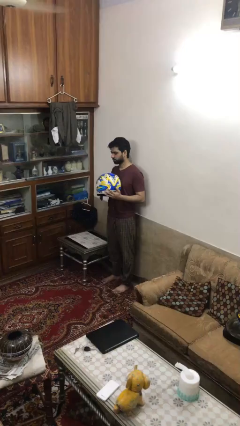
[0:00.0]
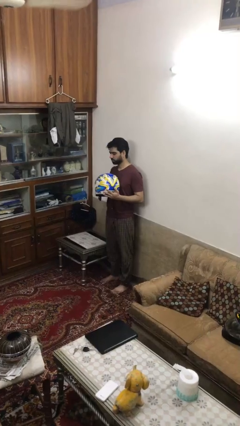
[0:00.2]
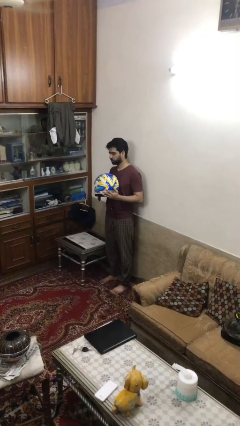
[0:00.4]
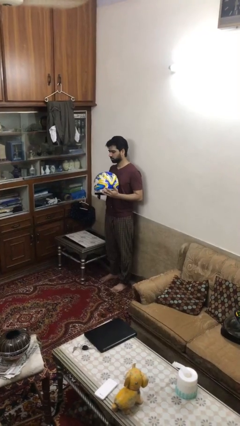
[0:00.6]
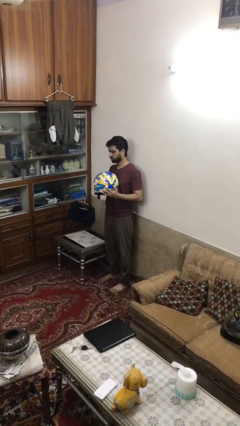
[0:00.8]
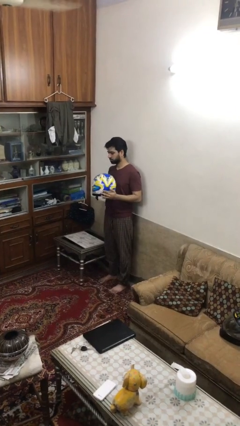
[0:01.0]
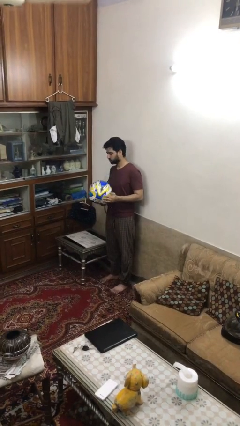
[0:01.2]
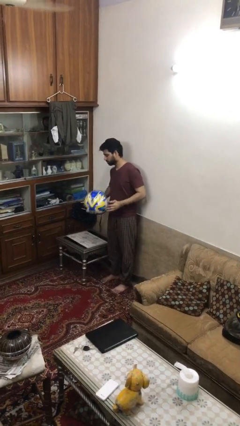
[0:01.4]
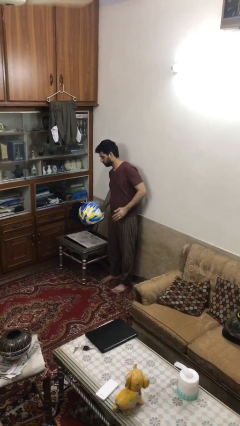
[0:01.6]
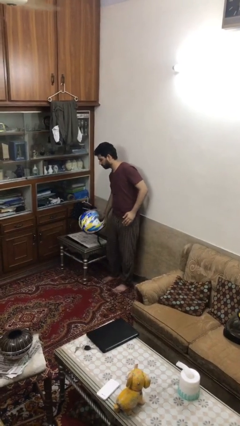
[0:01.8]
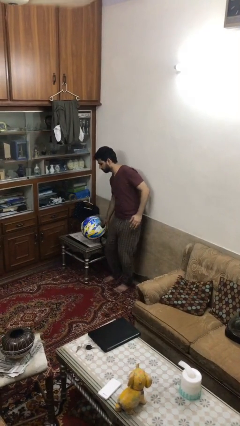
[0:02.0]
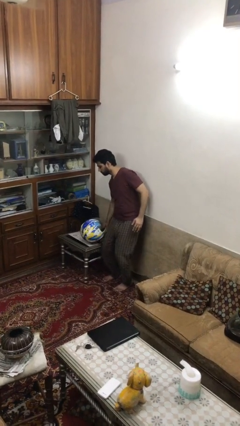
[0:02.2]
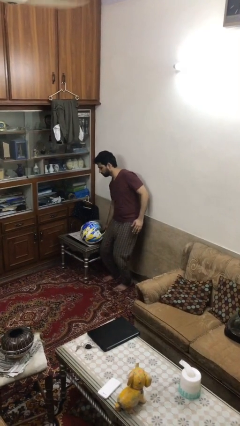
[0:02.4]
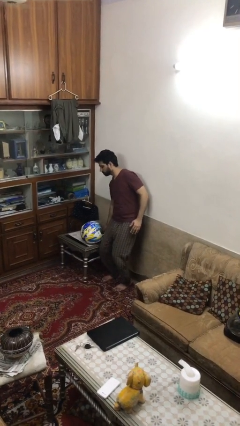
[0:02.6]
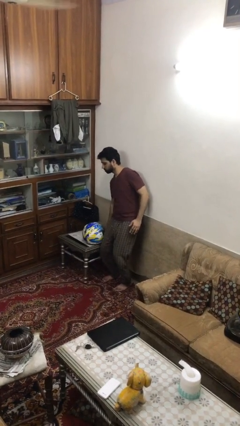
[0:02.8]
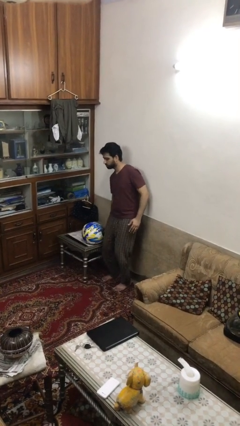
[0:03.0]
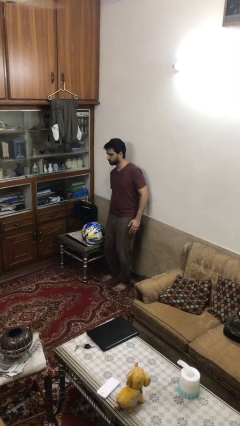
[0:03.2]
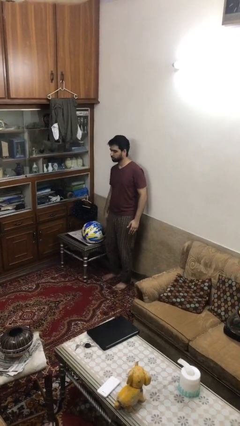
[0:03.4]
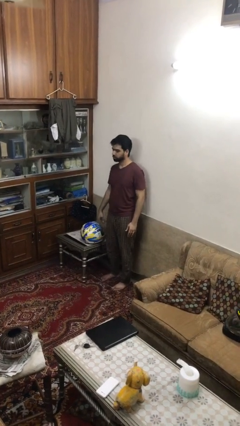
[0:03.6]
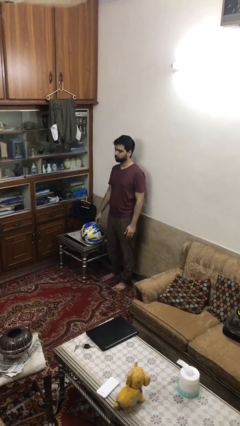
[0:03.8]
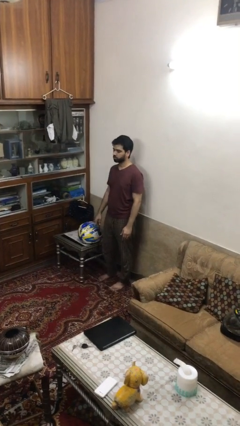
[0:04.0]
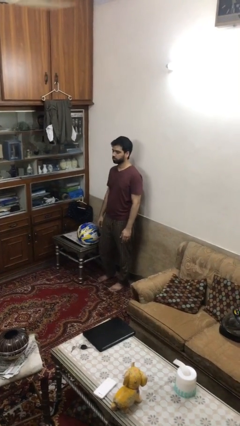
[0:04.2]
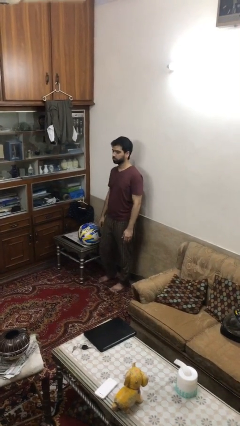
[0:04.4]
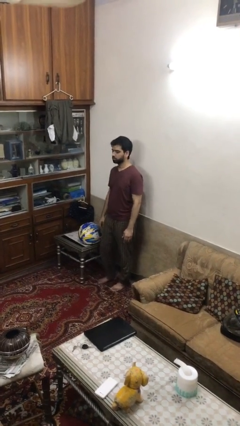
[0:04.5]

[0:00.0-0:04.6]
person puts down object on table

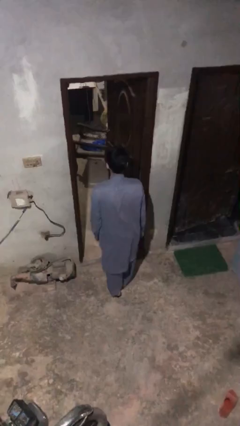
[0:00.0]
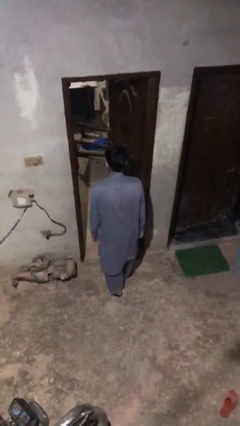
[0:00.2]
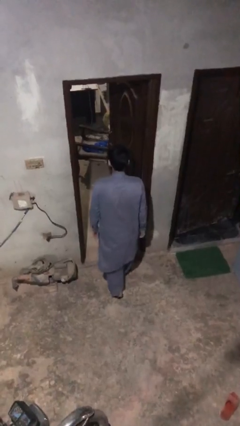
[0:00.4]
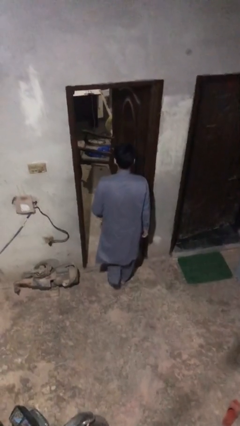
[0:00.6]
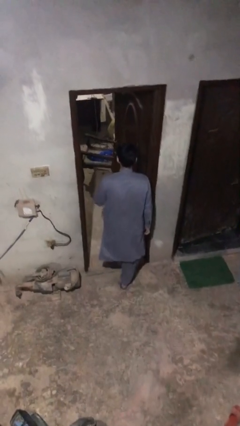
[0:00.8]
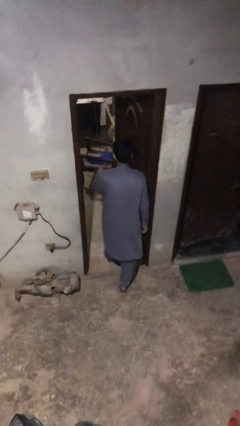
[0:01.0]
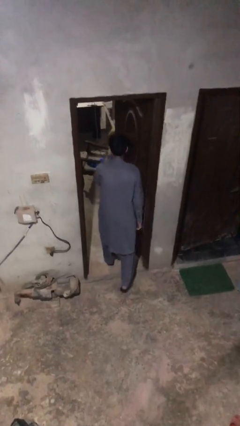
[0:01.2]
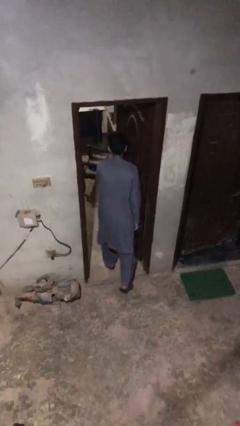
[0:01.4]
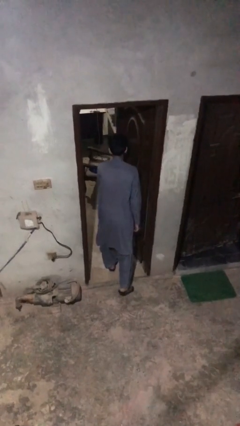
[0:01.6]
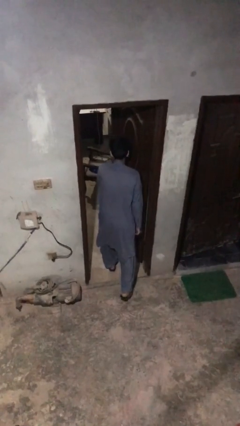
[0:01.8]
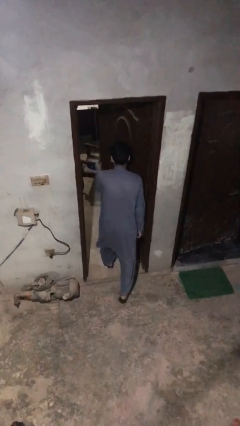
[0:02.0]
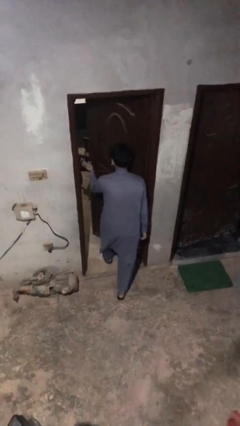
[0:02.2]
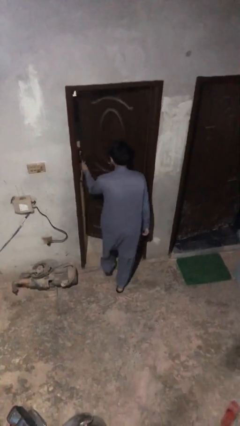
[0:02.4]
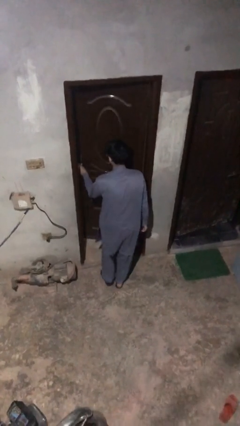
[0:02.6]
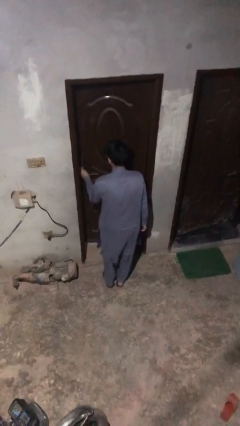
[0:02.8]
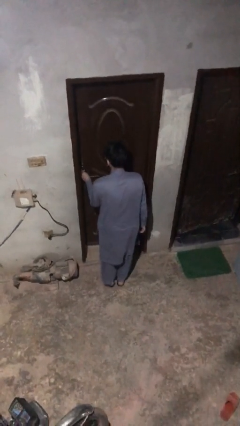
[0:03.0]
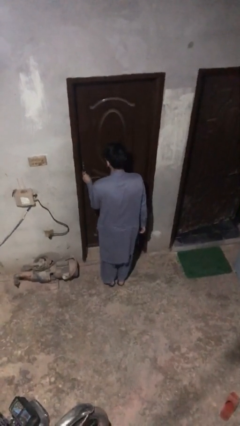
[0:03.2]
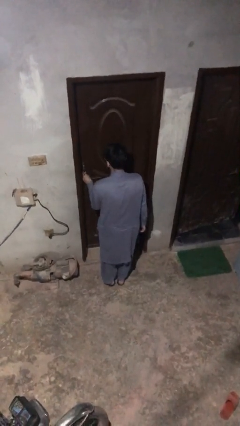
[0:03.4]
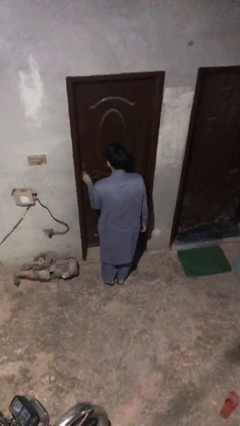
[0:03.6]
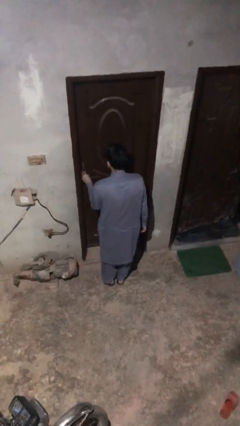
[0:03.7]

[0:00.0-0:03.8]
person closes facility door

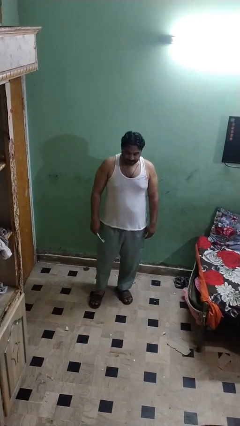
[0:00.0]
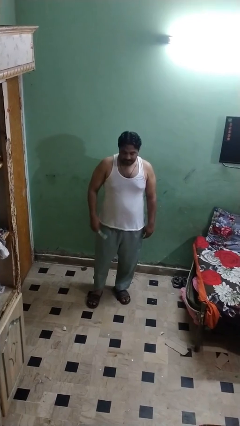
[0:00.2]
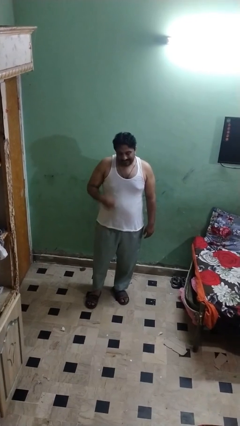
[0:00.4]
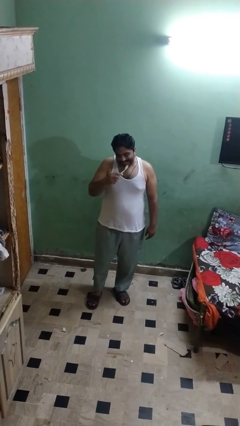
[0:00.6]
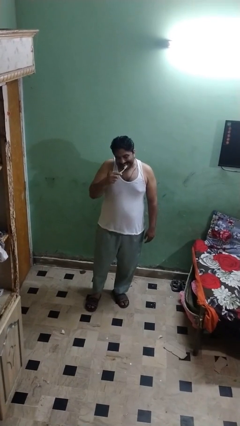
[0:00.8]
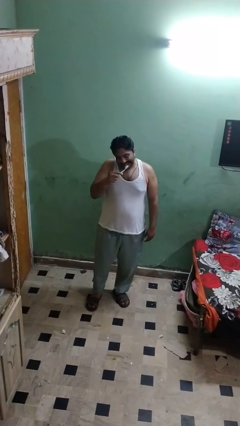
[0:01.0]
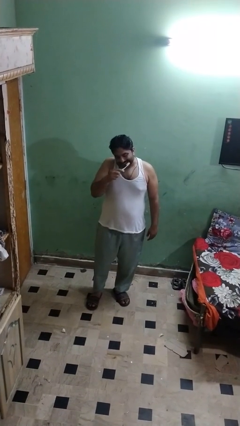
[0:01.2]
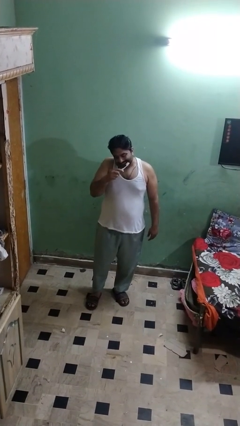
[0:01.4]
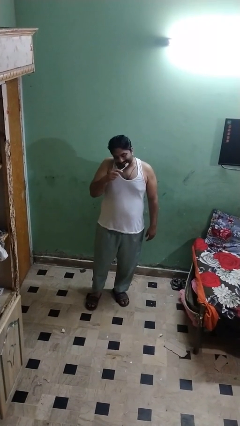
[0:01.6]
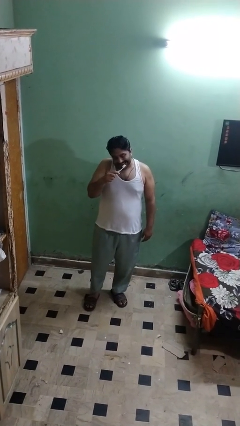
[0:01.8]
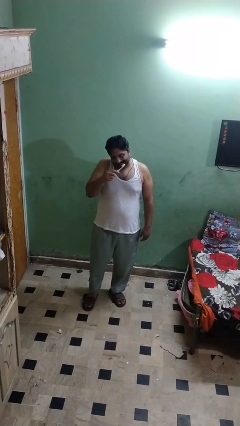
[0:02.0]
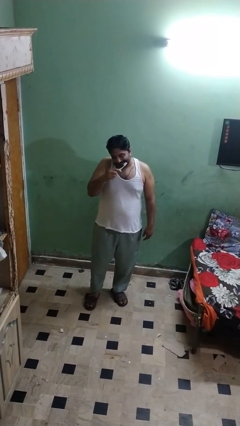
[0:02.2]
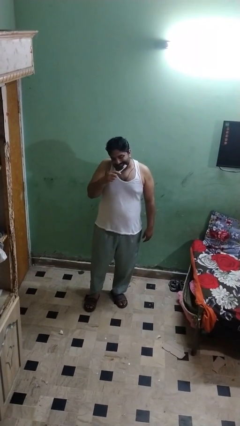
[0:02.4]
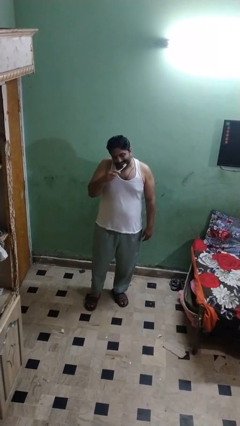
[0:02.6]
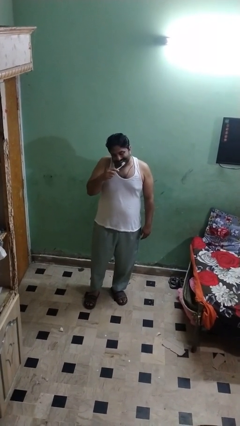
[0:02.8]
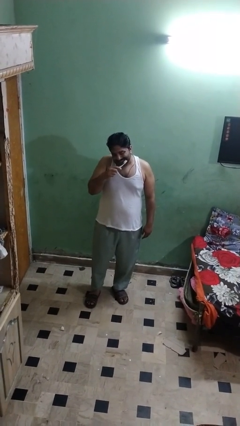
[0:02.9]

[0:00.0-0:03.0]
person brushes teeth

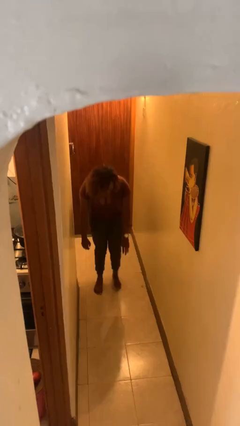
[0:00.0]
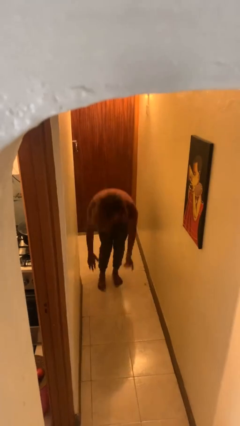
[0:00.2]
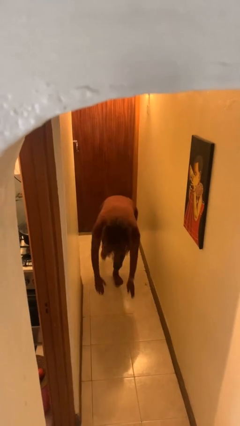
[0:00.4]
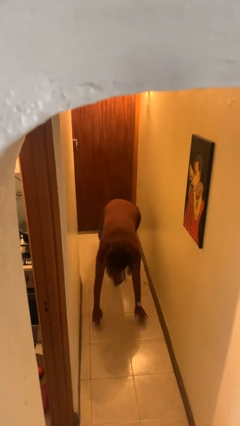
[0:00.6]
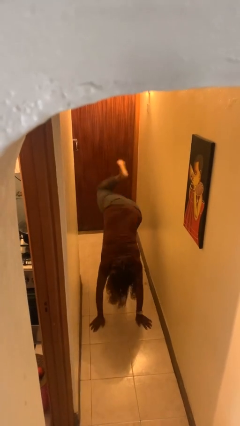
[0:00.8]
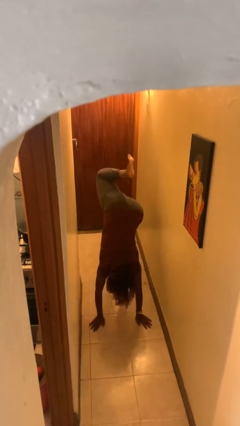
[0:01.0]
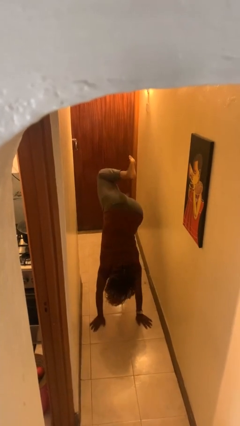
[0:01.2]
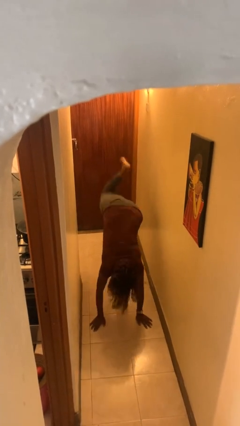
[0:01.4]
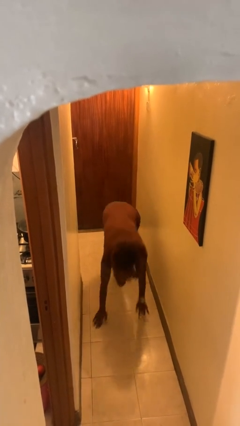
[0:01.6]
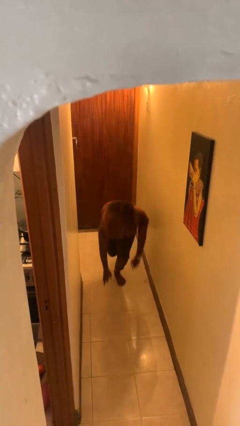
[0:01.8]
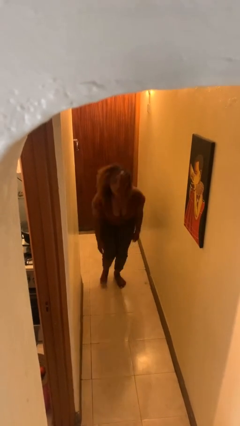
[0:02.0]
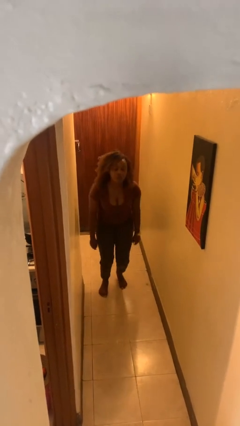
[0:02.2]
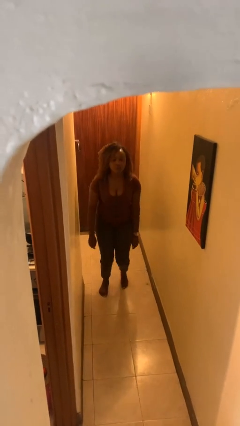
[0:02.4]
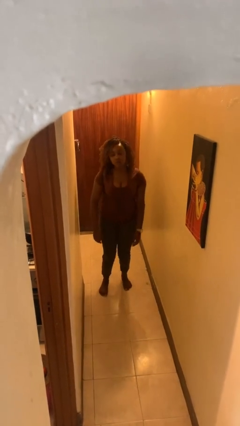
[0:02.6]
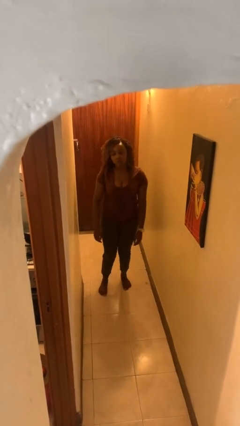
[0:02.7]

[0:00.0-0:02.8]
person handstand

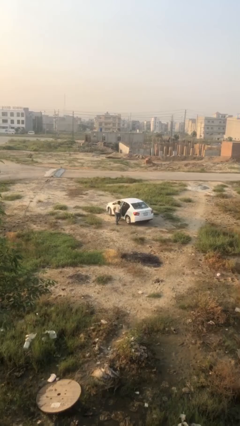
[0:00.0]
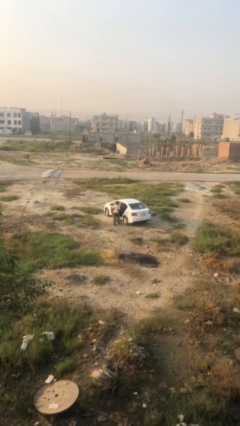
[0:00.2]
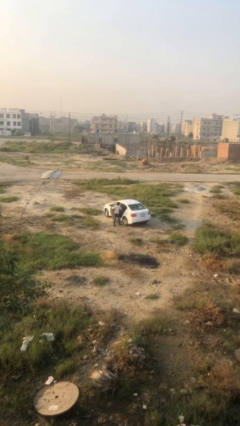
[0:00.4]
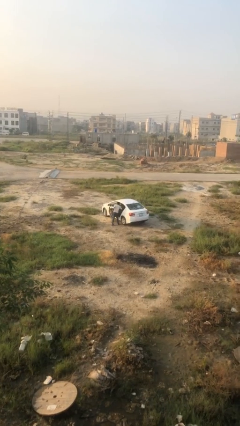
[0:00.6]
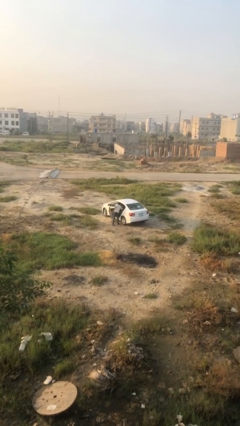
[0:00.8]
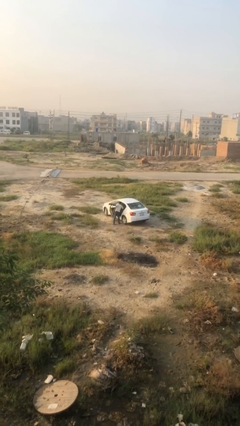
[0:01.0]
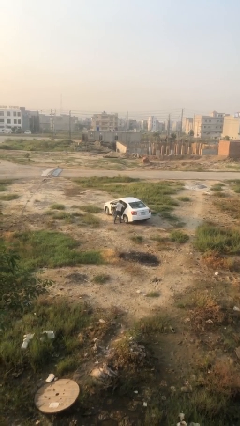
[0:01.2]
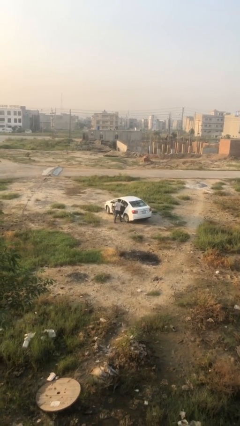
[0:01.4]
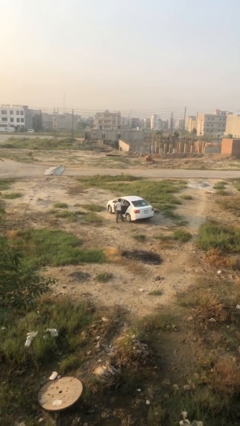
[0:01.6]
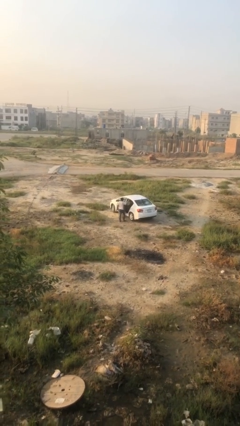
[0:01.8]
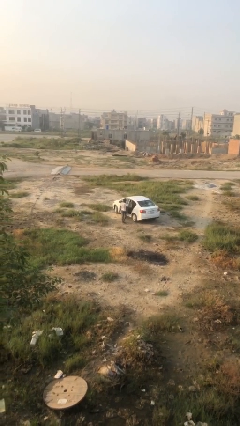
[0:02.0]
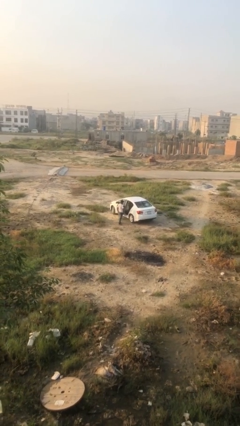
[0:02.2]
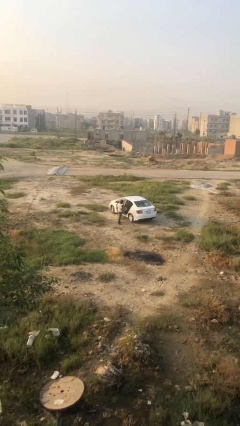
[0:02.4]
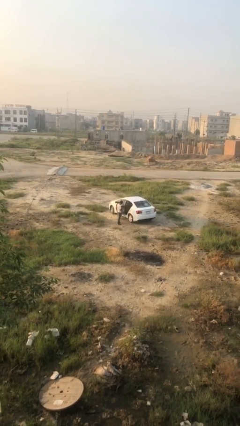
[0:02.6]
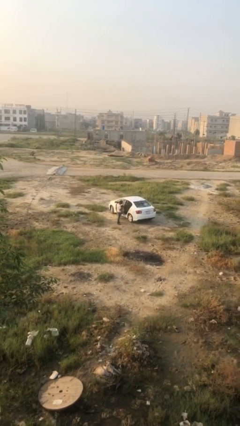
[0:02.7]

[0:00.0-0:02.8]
person unloads car

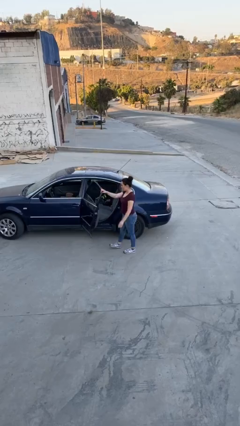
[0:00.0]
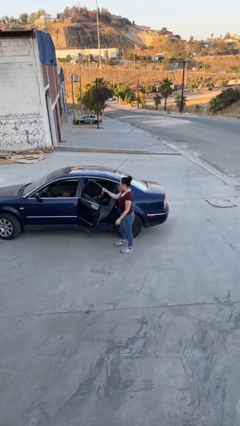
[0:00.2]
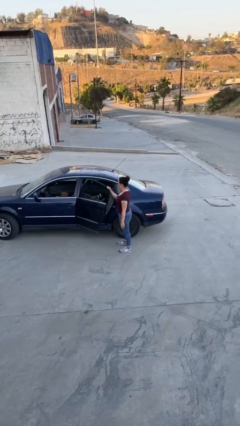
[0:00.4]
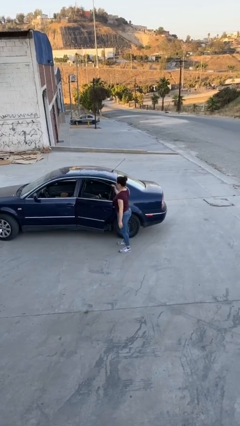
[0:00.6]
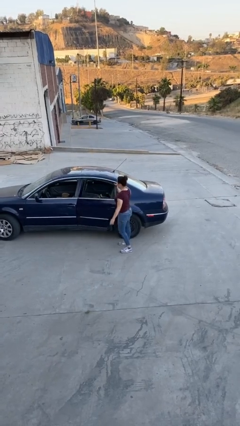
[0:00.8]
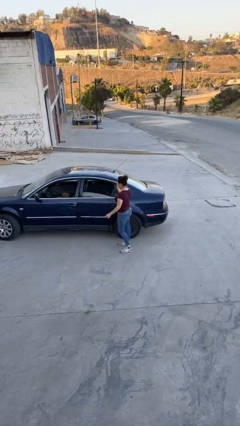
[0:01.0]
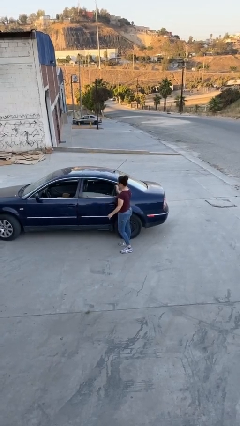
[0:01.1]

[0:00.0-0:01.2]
person closes car door
